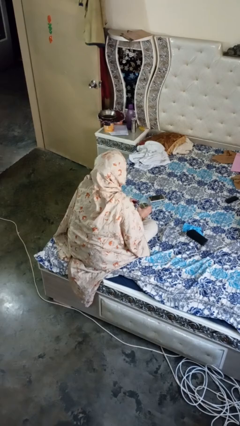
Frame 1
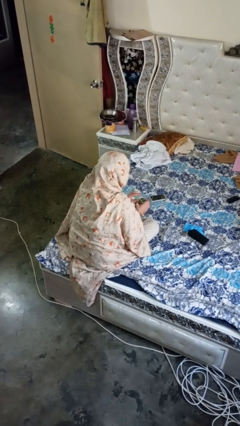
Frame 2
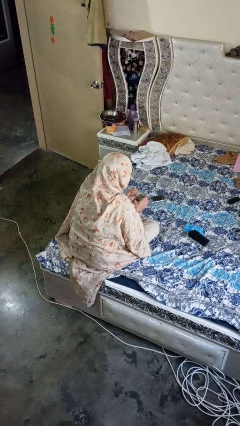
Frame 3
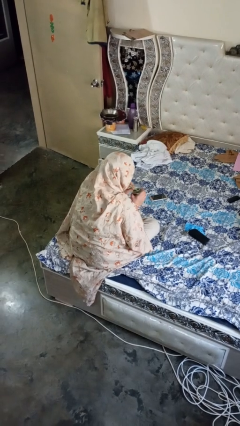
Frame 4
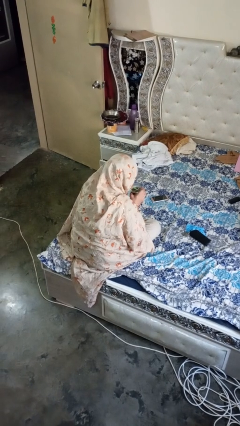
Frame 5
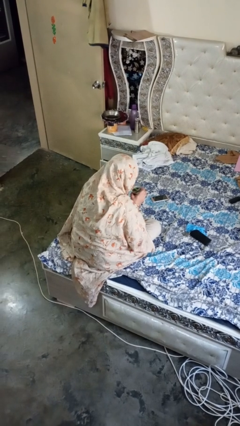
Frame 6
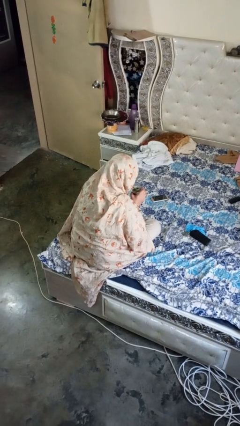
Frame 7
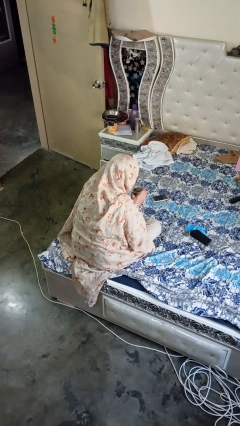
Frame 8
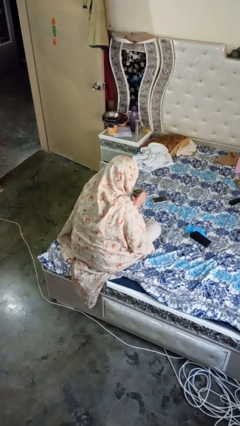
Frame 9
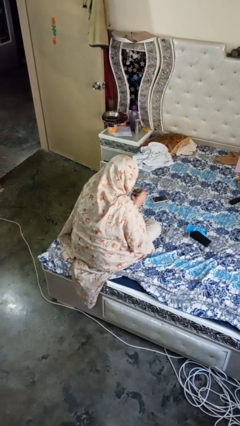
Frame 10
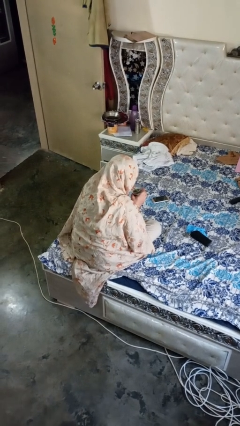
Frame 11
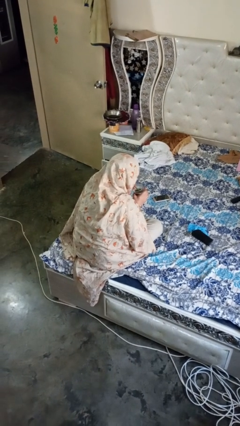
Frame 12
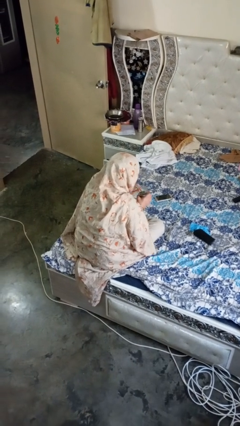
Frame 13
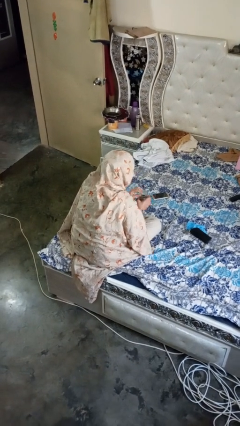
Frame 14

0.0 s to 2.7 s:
person drinks from straw

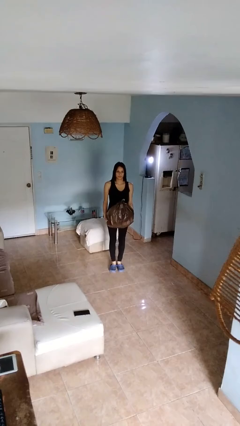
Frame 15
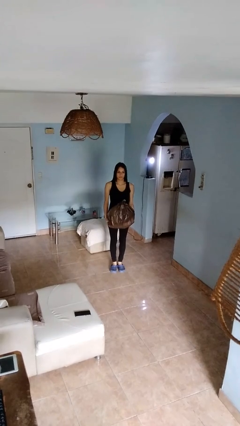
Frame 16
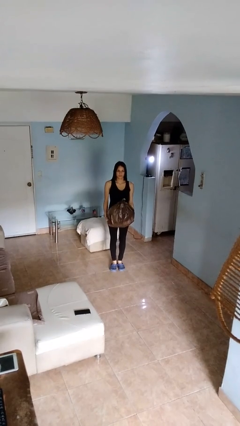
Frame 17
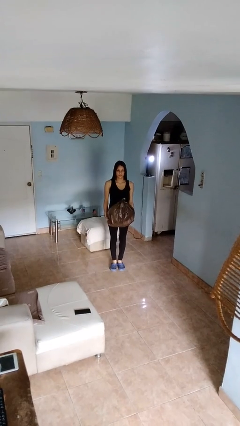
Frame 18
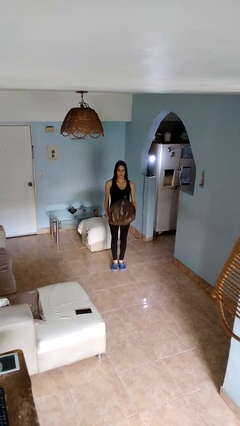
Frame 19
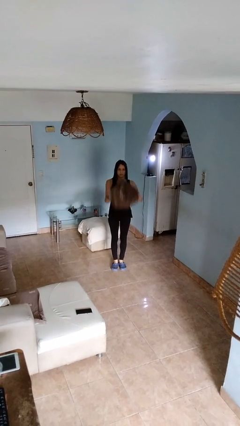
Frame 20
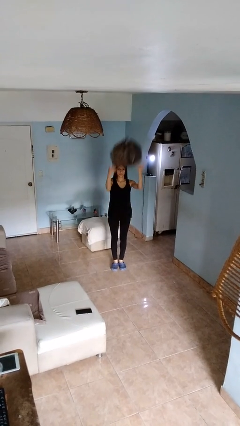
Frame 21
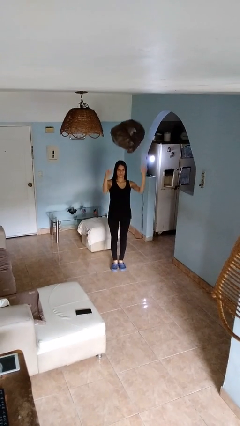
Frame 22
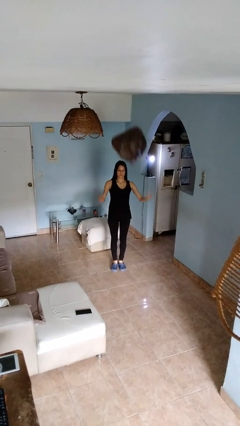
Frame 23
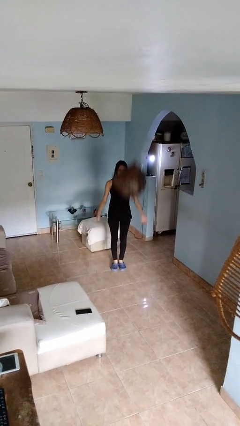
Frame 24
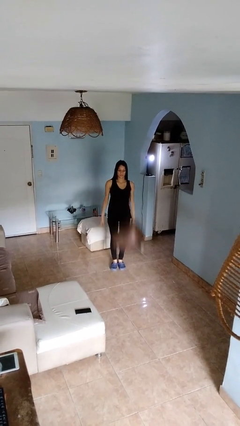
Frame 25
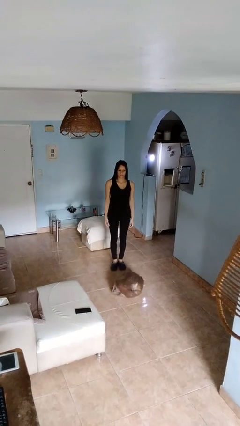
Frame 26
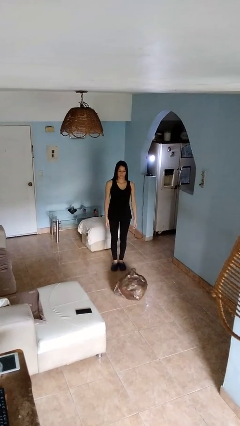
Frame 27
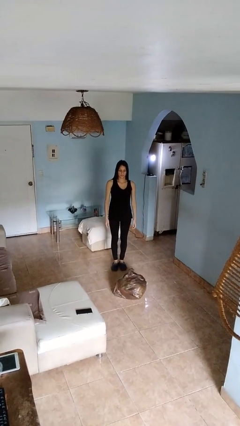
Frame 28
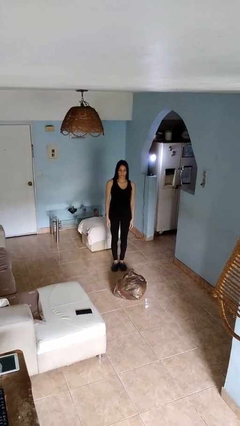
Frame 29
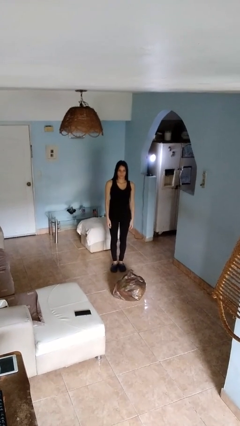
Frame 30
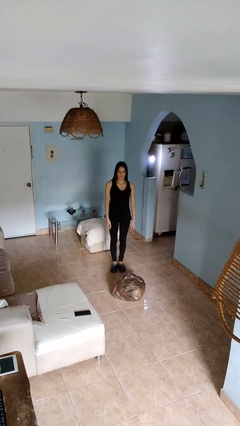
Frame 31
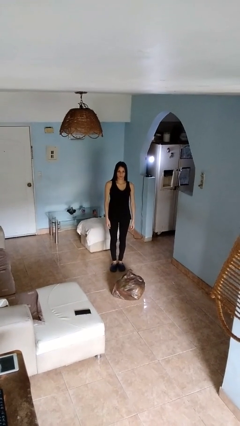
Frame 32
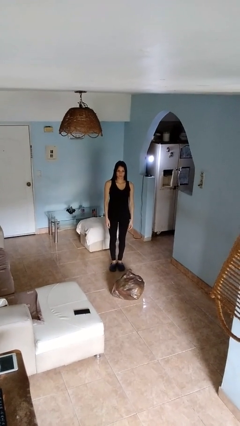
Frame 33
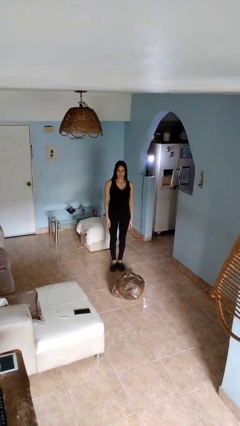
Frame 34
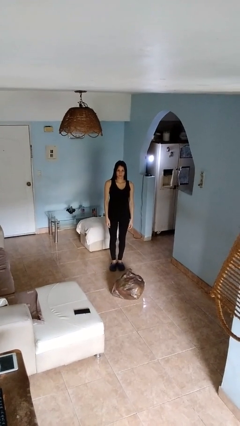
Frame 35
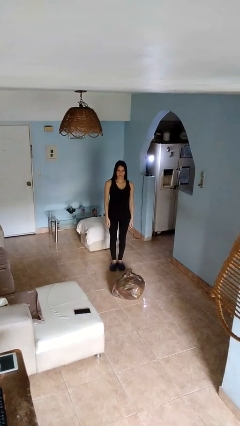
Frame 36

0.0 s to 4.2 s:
person throws object into air

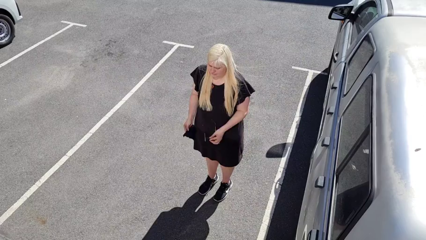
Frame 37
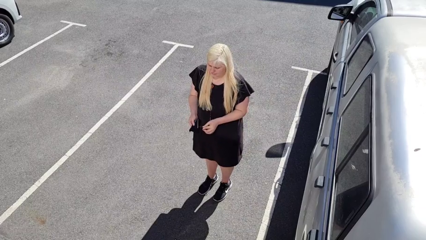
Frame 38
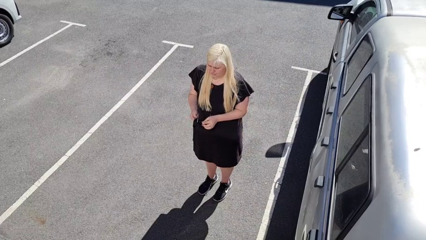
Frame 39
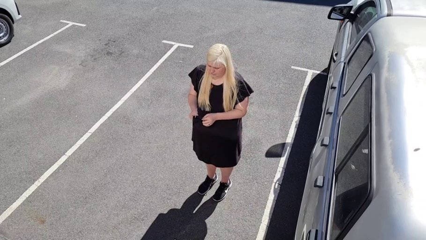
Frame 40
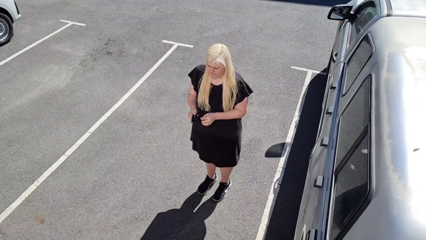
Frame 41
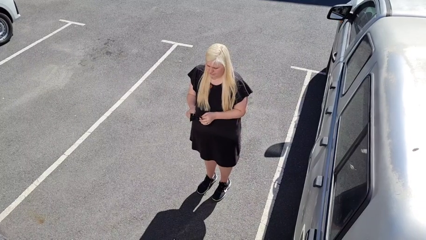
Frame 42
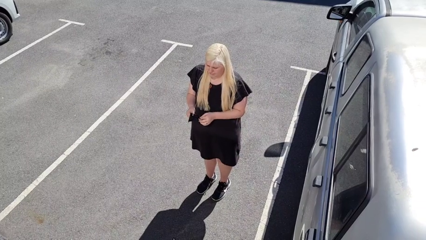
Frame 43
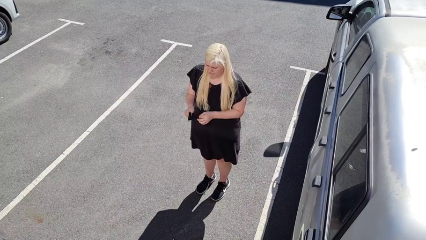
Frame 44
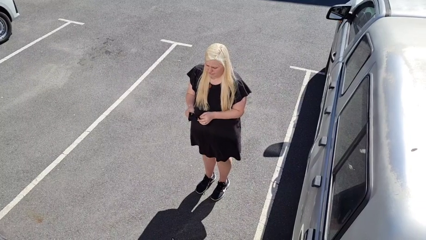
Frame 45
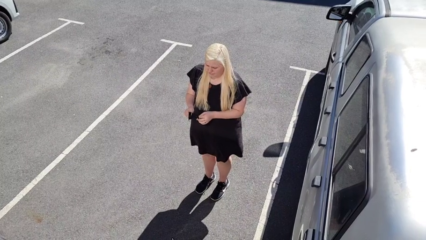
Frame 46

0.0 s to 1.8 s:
person cleans eyeglasses

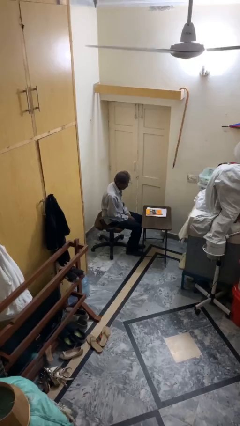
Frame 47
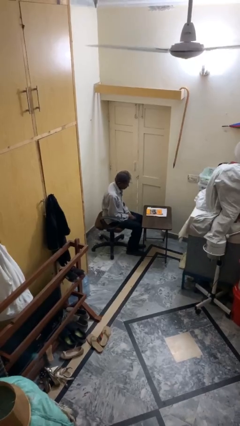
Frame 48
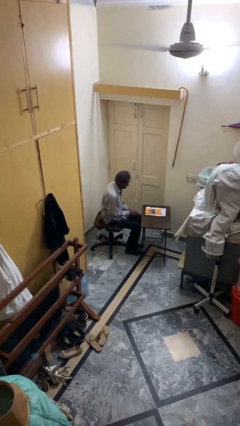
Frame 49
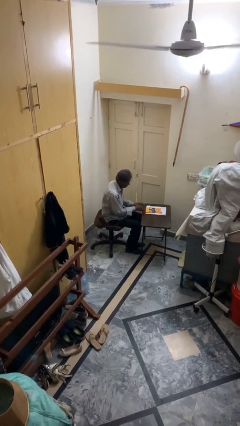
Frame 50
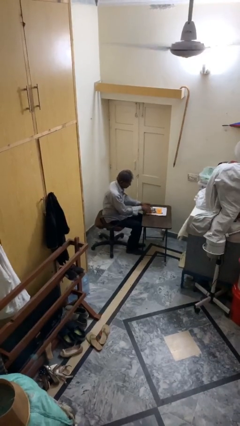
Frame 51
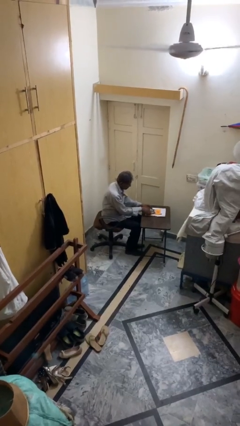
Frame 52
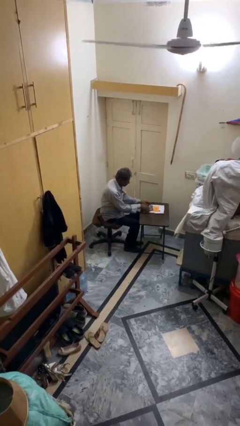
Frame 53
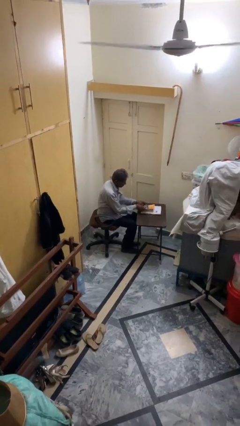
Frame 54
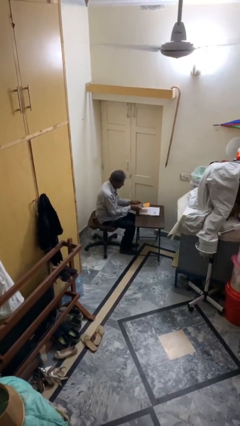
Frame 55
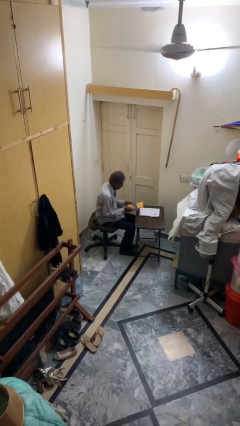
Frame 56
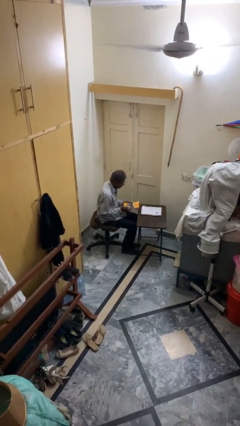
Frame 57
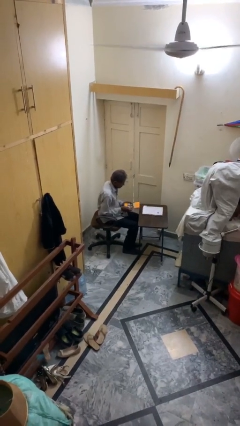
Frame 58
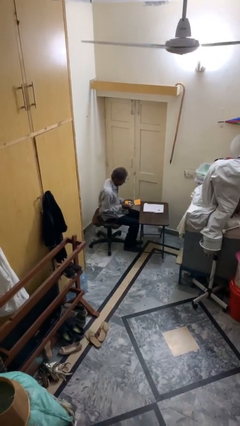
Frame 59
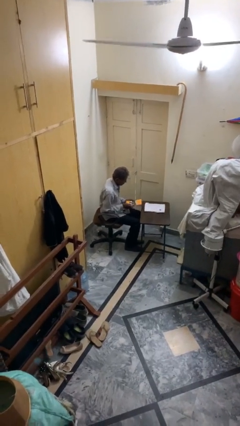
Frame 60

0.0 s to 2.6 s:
person picks up object from table

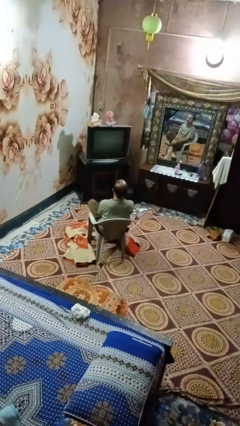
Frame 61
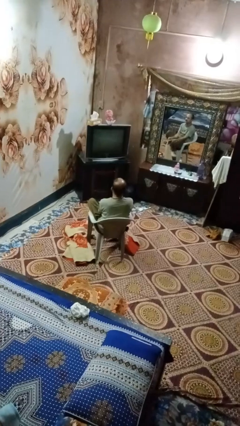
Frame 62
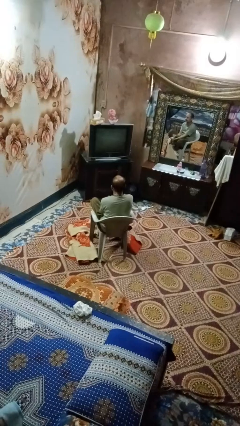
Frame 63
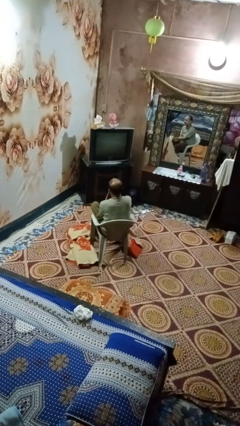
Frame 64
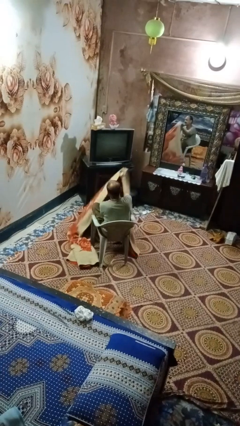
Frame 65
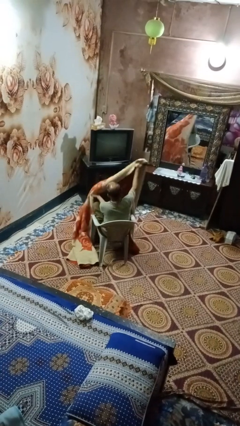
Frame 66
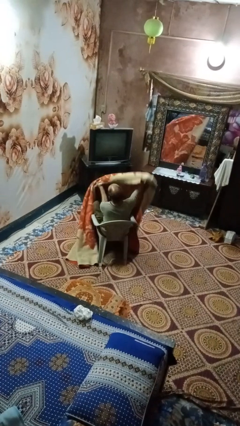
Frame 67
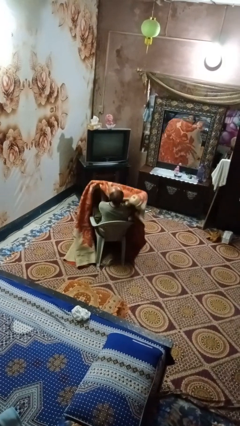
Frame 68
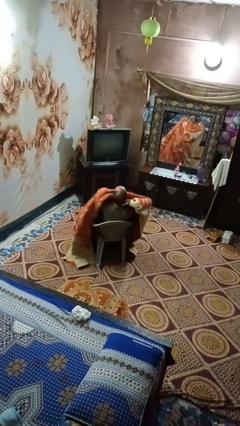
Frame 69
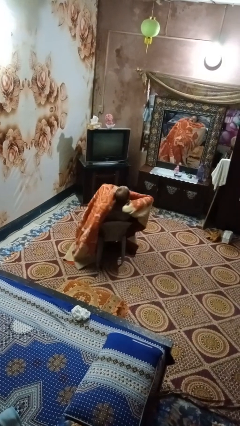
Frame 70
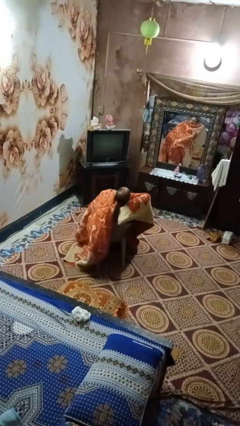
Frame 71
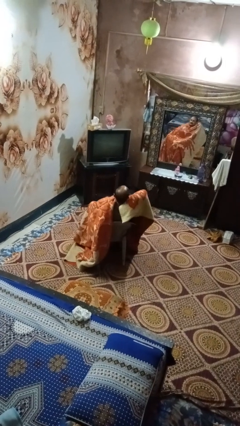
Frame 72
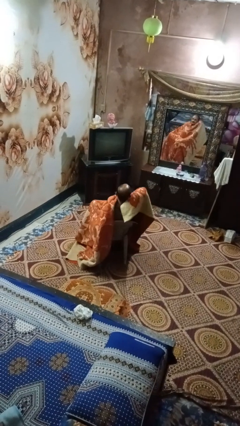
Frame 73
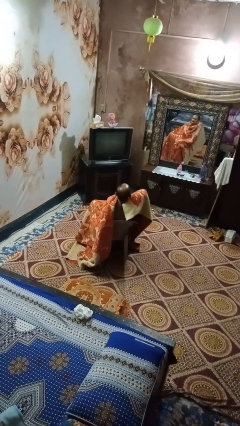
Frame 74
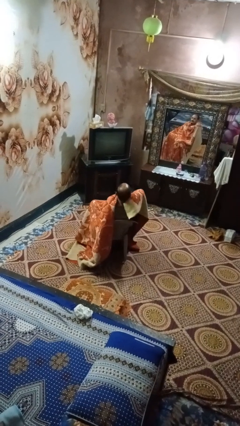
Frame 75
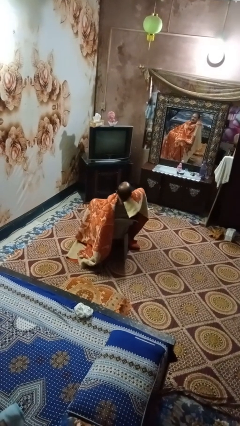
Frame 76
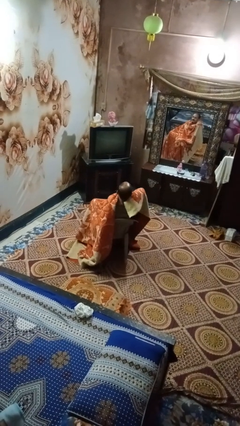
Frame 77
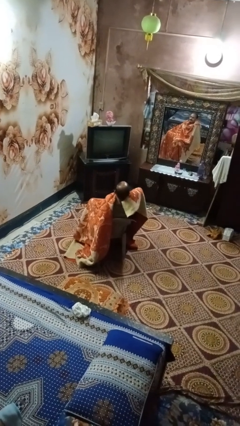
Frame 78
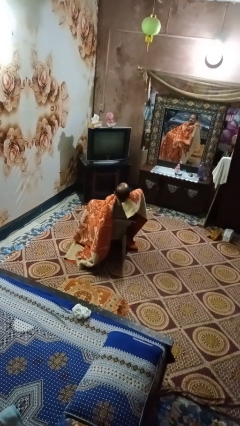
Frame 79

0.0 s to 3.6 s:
person covers with blanket

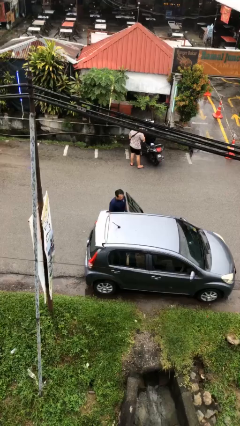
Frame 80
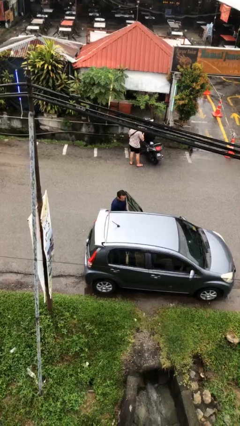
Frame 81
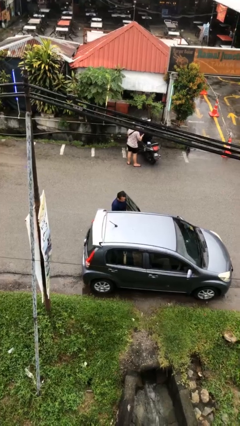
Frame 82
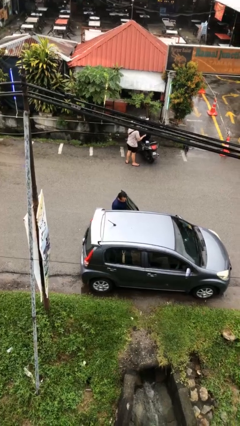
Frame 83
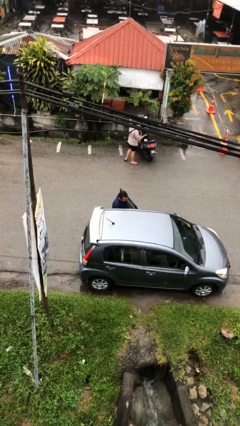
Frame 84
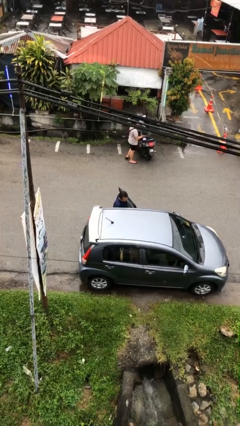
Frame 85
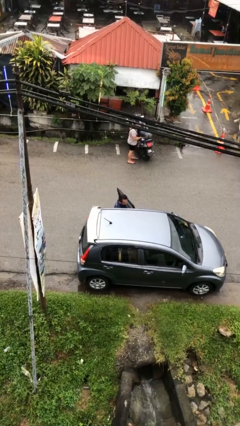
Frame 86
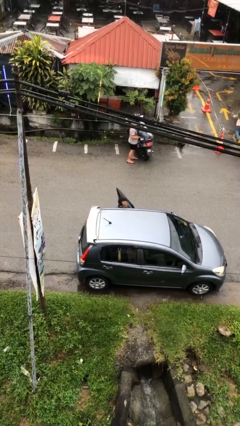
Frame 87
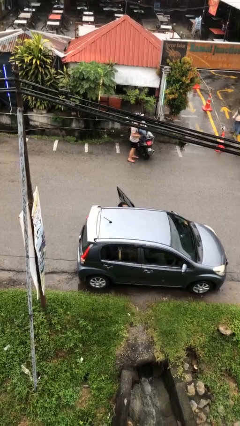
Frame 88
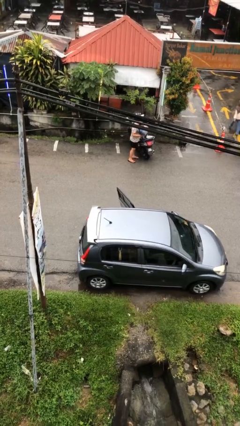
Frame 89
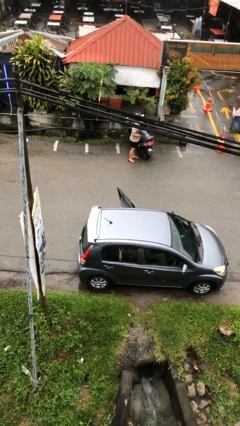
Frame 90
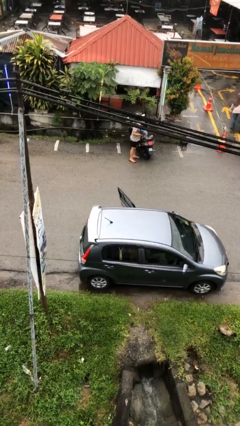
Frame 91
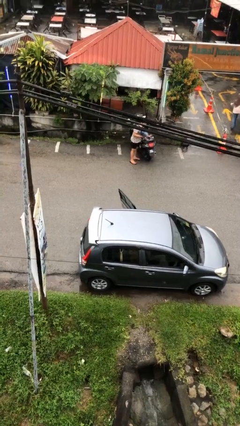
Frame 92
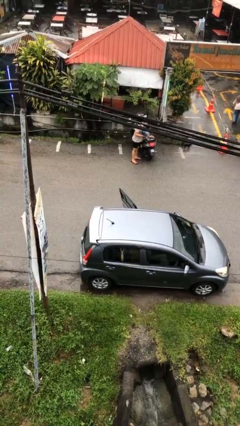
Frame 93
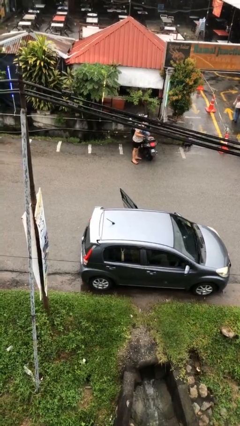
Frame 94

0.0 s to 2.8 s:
person enters car
